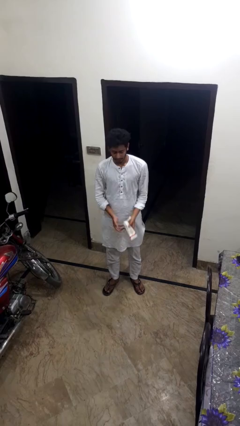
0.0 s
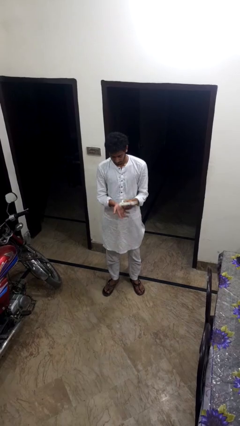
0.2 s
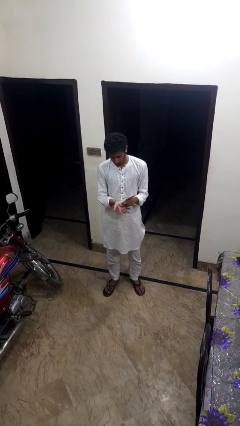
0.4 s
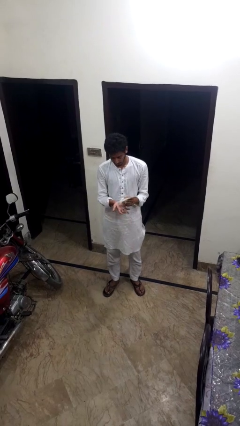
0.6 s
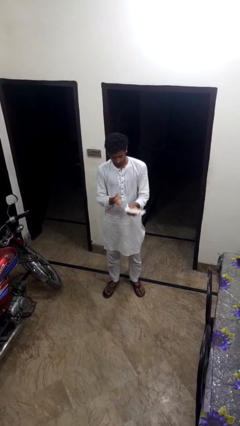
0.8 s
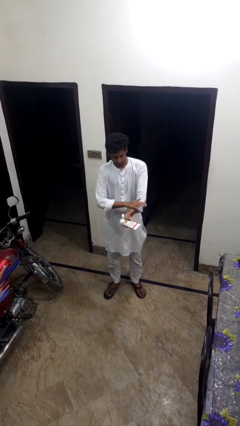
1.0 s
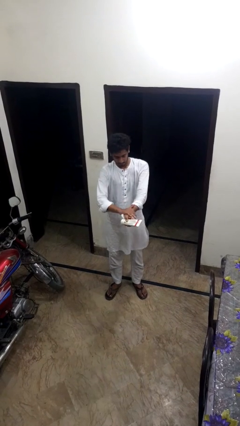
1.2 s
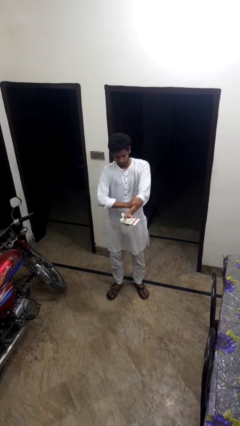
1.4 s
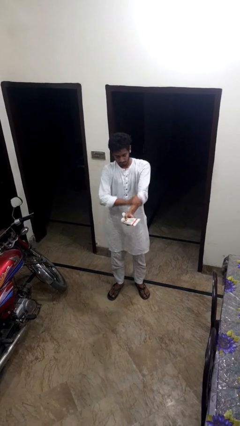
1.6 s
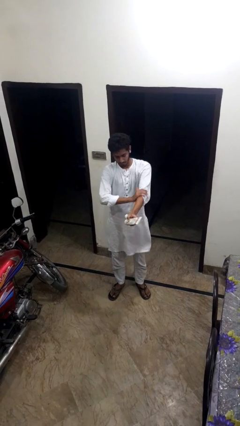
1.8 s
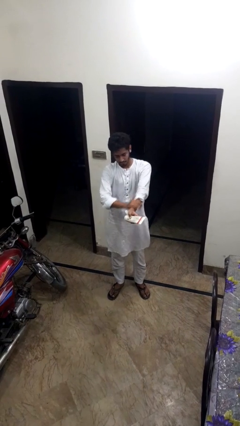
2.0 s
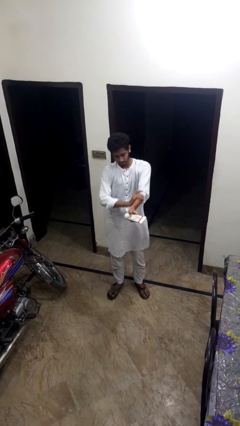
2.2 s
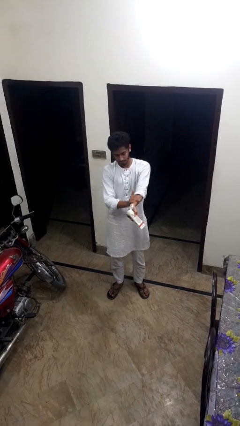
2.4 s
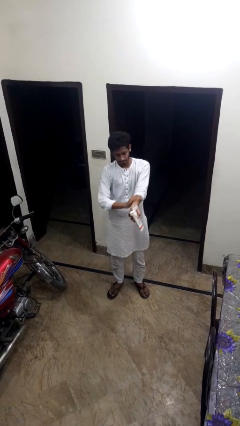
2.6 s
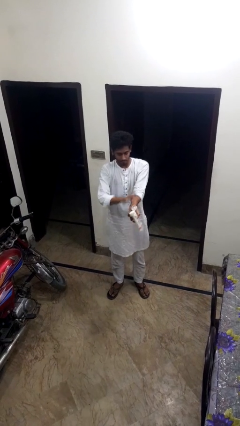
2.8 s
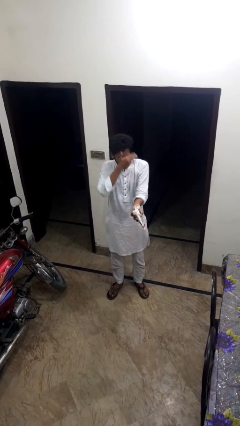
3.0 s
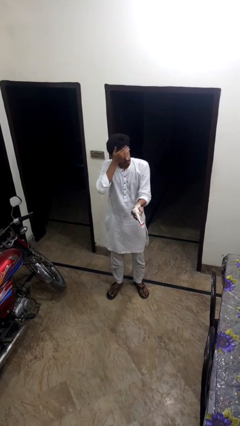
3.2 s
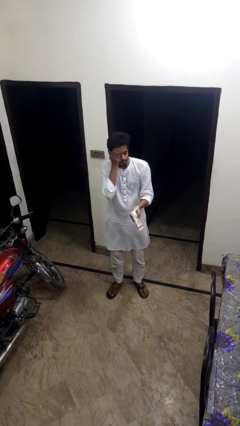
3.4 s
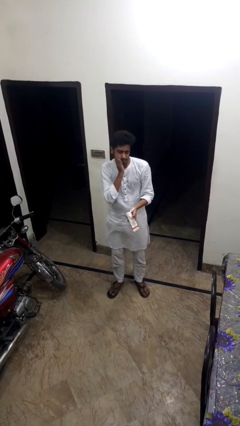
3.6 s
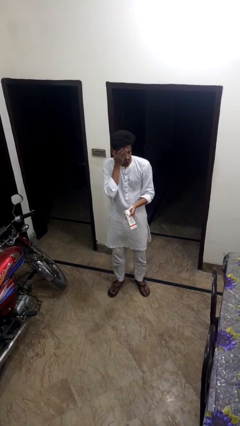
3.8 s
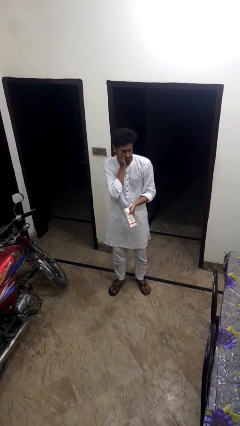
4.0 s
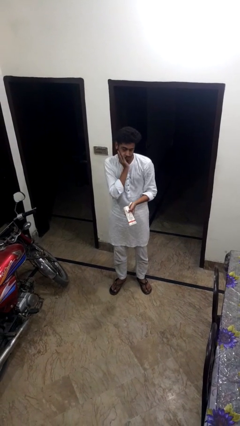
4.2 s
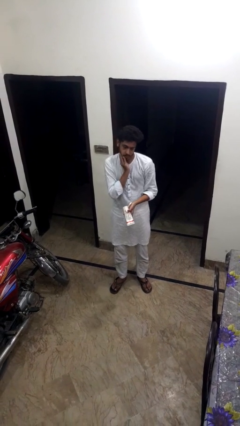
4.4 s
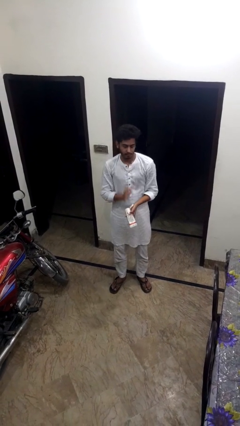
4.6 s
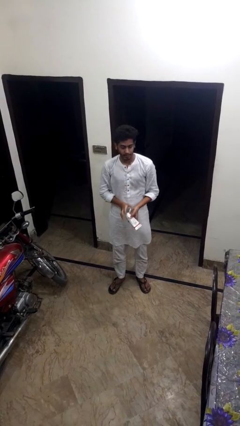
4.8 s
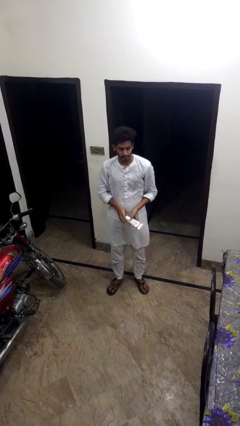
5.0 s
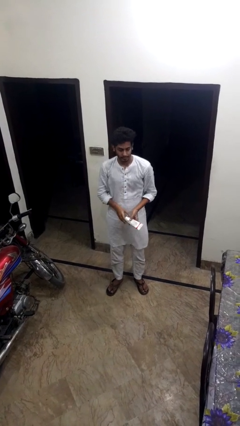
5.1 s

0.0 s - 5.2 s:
person applies sunscreen

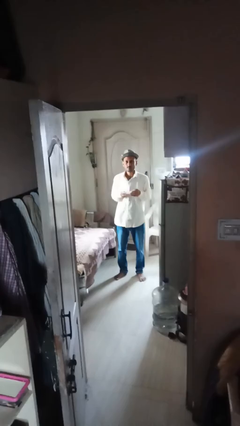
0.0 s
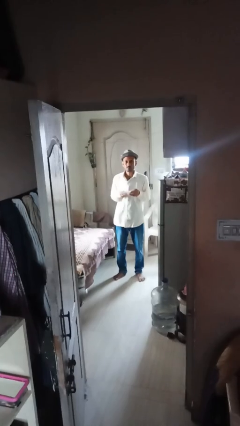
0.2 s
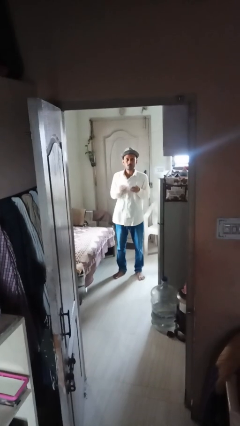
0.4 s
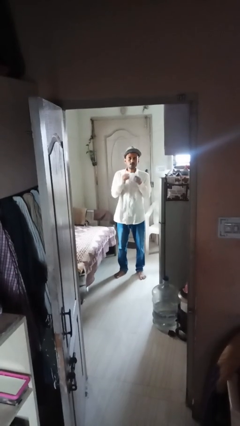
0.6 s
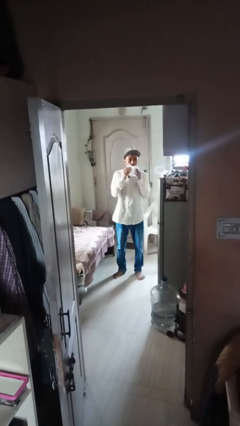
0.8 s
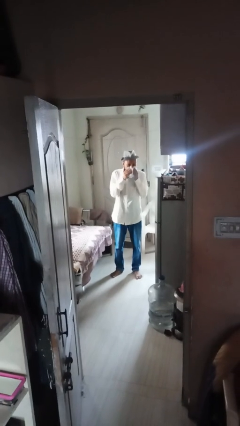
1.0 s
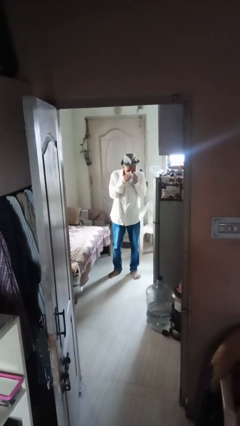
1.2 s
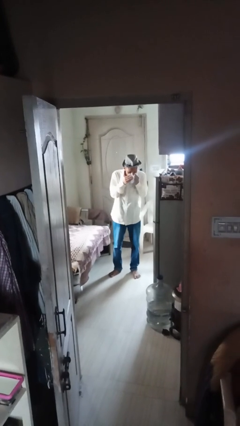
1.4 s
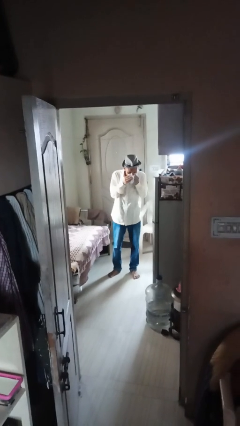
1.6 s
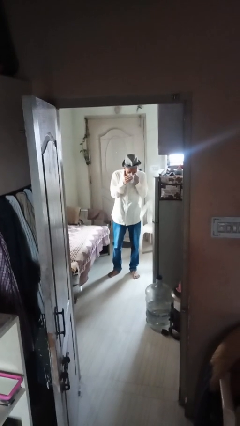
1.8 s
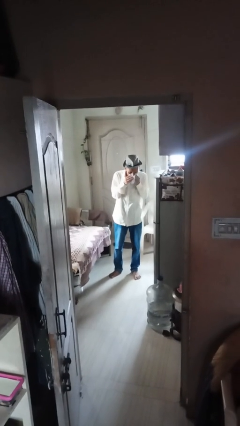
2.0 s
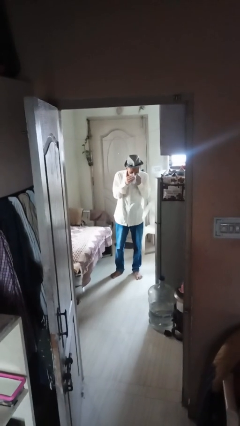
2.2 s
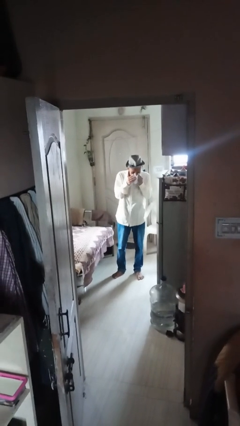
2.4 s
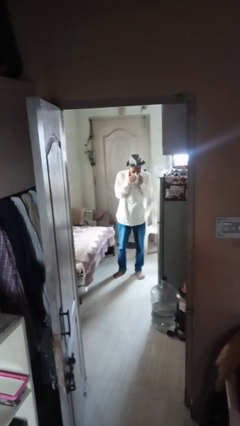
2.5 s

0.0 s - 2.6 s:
person blows nose

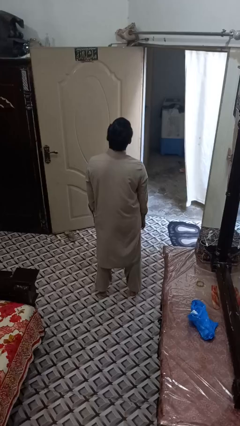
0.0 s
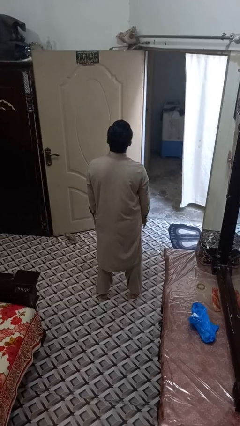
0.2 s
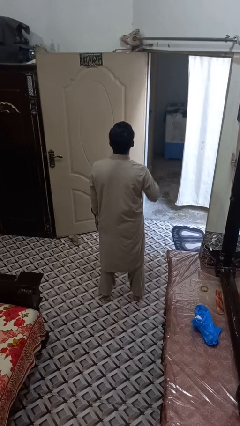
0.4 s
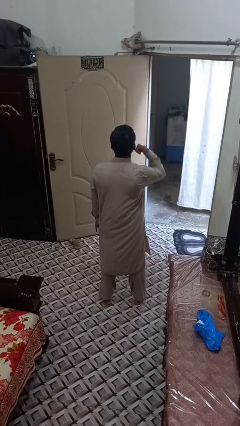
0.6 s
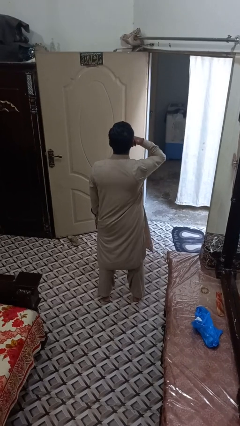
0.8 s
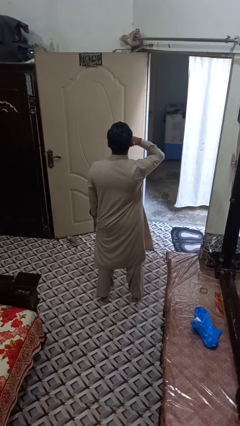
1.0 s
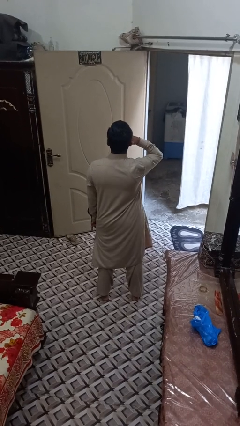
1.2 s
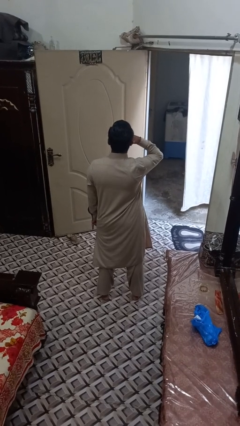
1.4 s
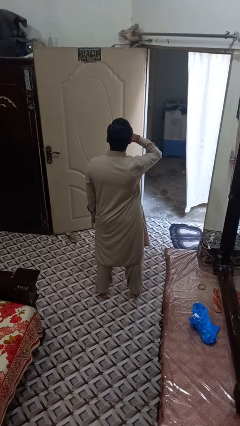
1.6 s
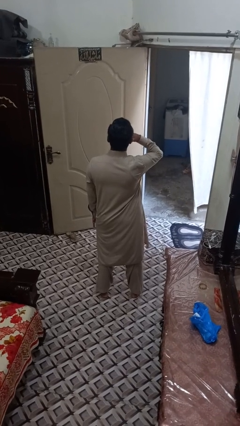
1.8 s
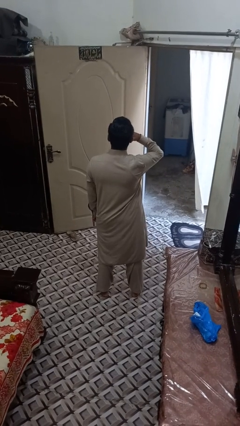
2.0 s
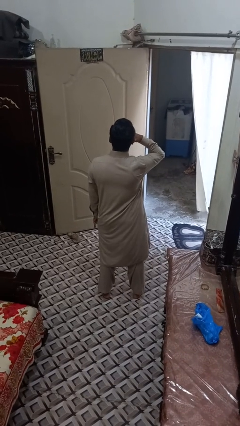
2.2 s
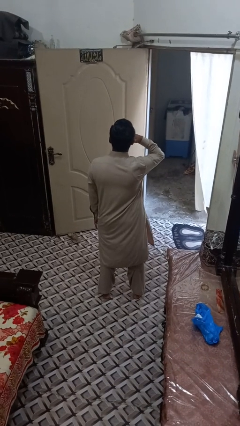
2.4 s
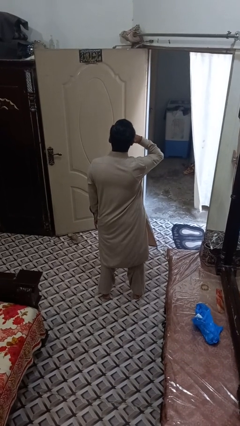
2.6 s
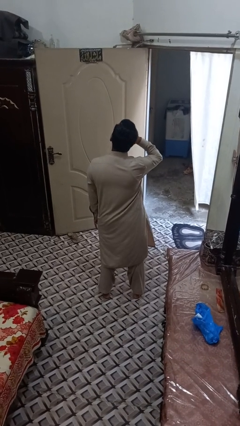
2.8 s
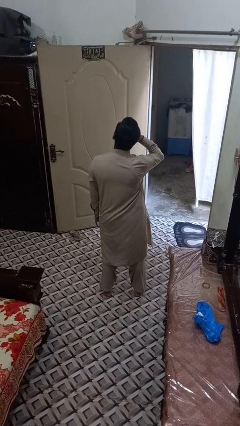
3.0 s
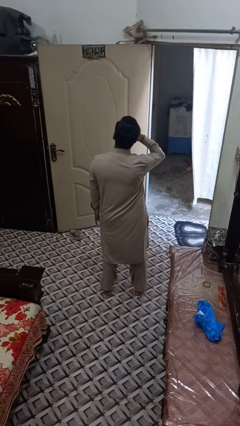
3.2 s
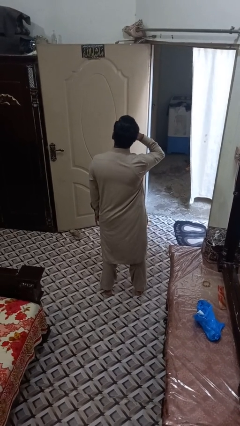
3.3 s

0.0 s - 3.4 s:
person gestures call me

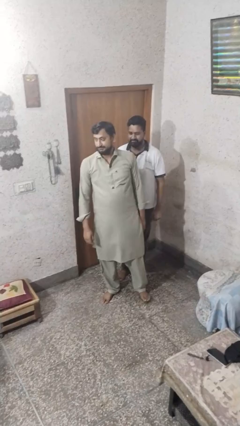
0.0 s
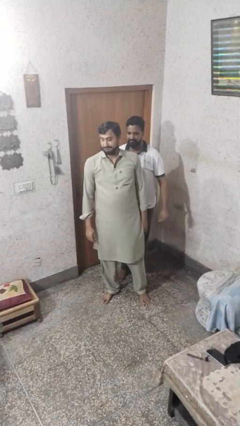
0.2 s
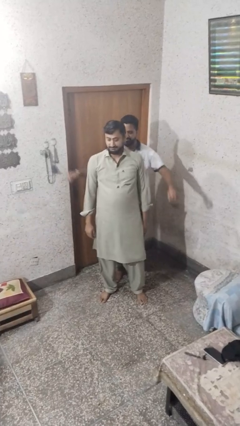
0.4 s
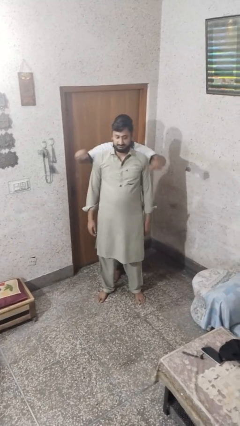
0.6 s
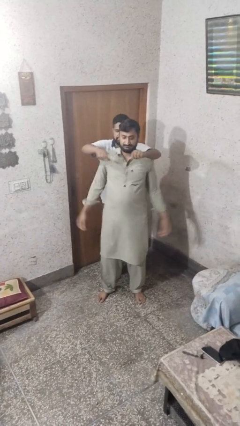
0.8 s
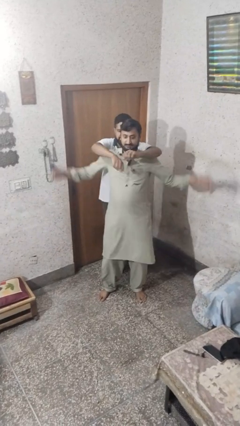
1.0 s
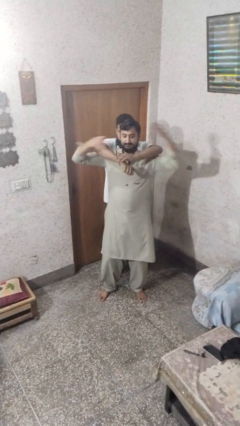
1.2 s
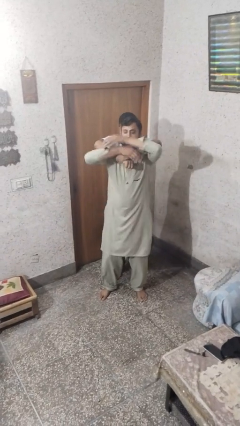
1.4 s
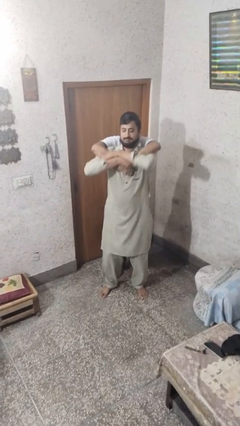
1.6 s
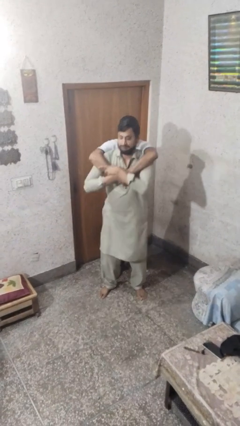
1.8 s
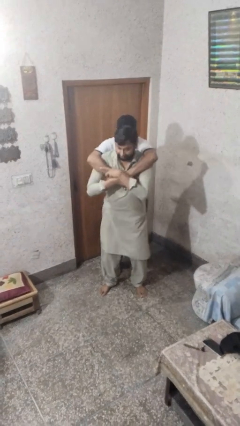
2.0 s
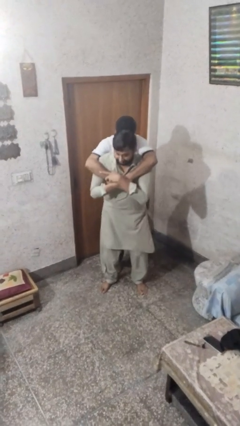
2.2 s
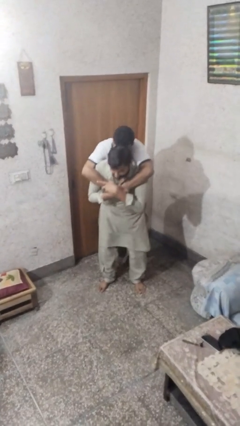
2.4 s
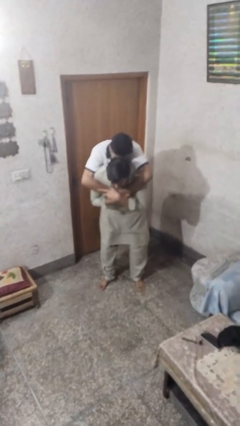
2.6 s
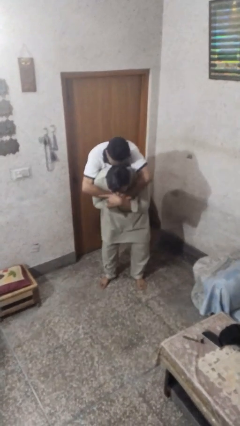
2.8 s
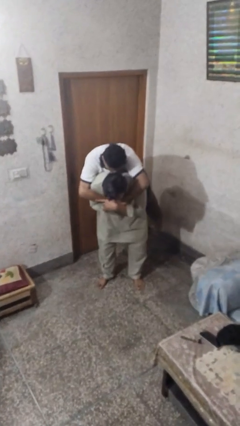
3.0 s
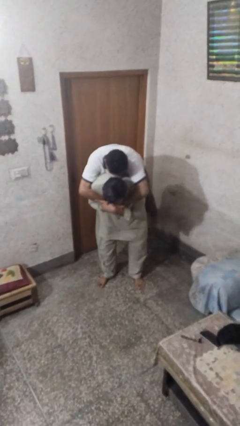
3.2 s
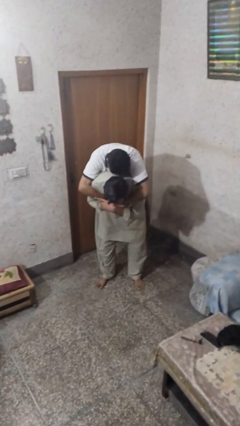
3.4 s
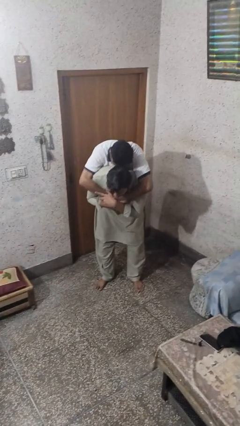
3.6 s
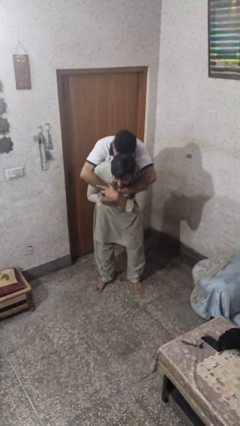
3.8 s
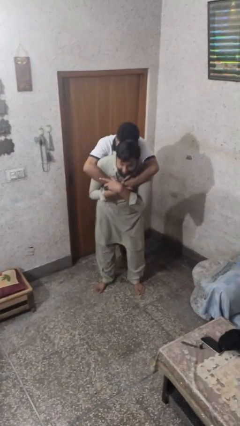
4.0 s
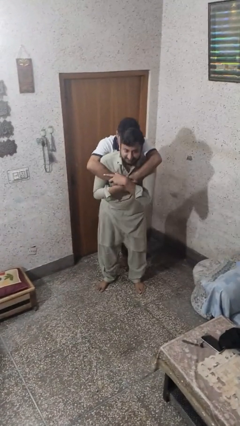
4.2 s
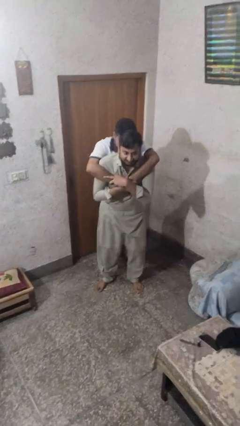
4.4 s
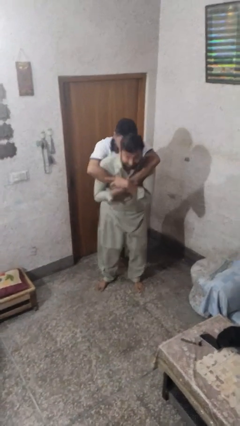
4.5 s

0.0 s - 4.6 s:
person carries person on back

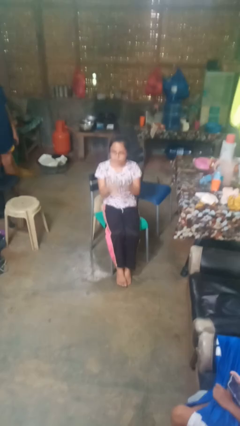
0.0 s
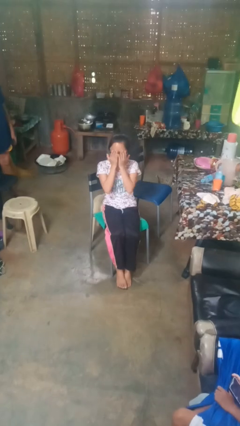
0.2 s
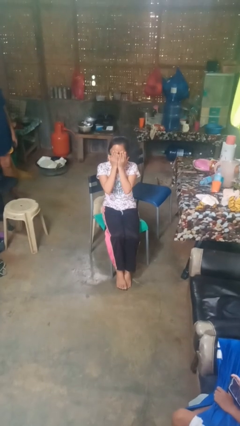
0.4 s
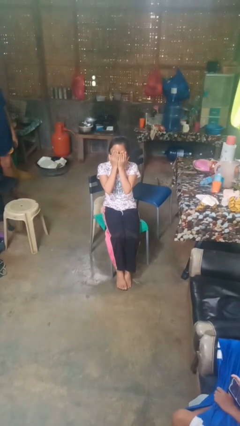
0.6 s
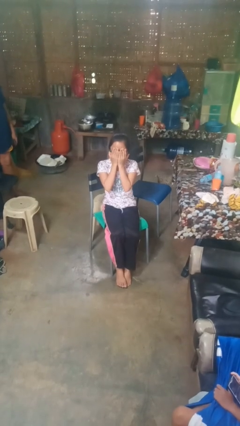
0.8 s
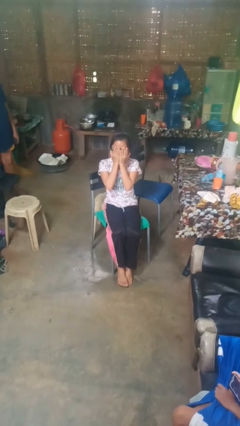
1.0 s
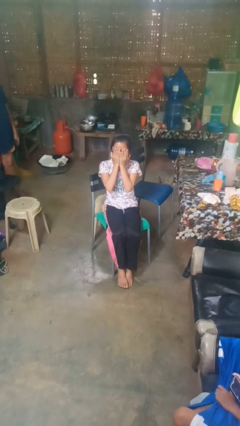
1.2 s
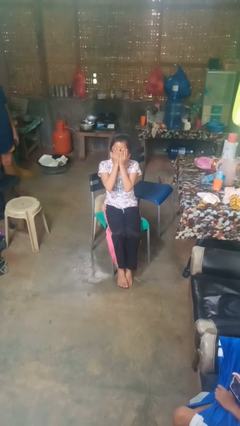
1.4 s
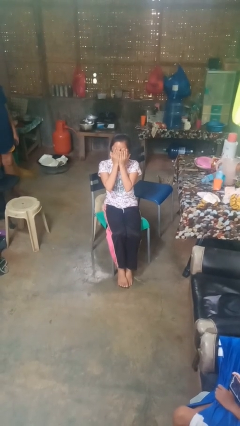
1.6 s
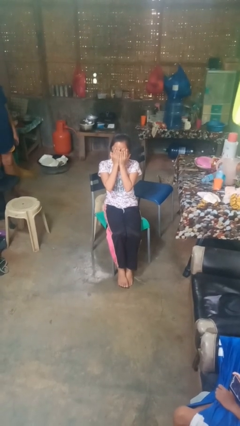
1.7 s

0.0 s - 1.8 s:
person covers face with hands
